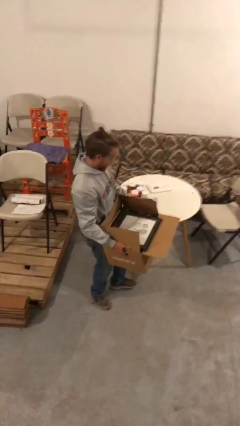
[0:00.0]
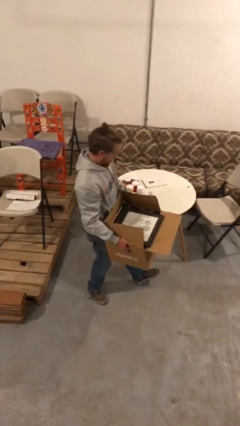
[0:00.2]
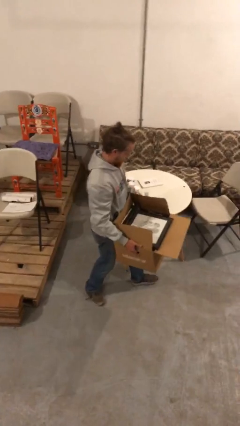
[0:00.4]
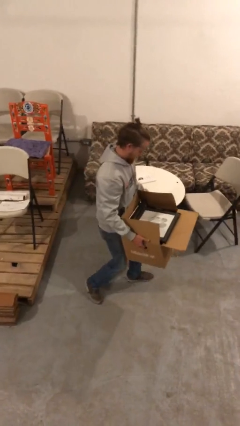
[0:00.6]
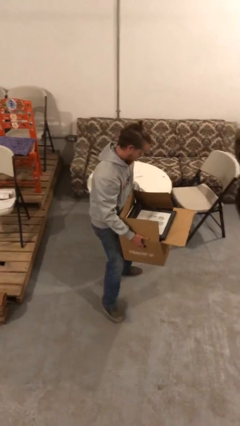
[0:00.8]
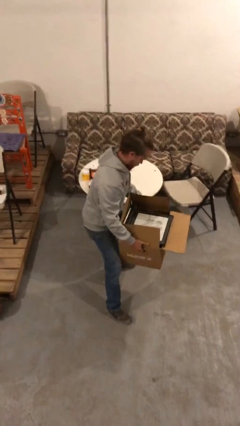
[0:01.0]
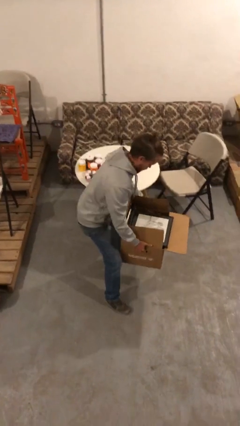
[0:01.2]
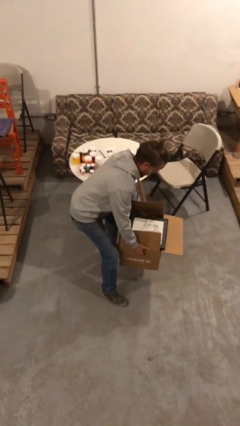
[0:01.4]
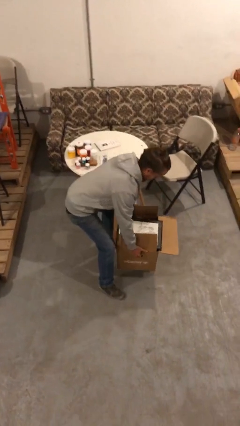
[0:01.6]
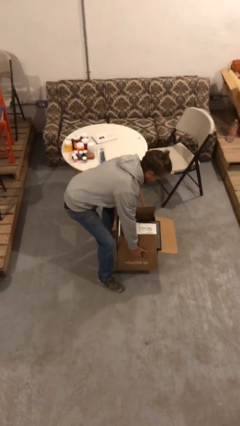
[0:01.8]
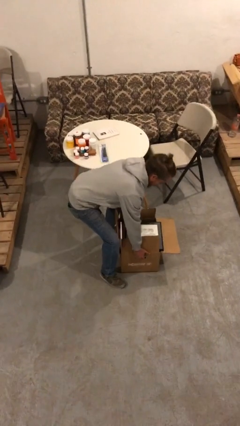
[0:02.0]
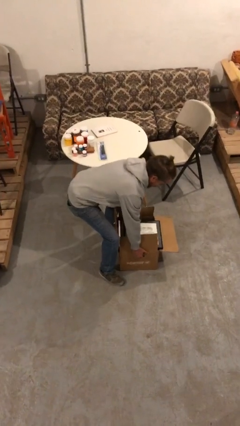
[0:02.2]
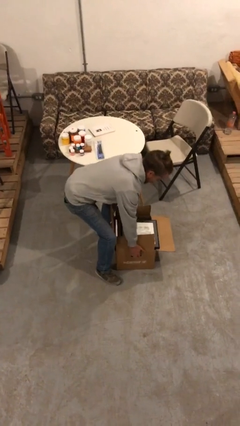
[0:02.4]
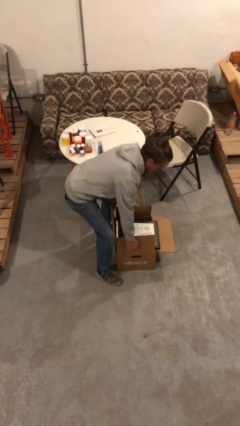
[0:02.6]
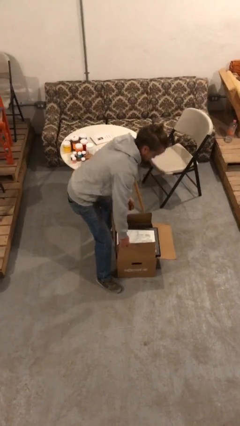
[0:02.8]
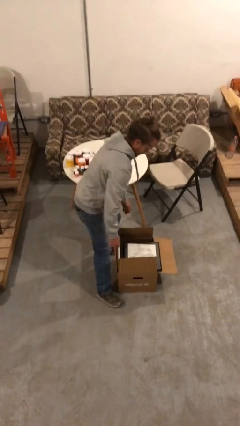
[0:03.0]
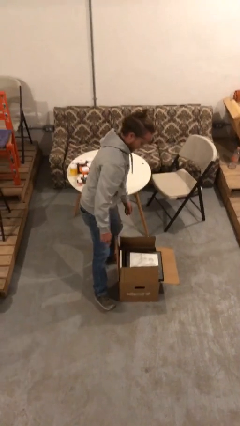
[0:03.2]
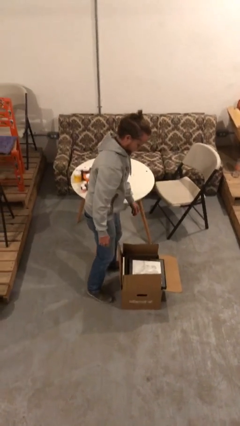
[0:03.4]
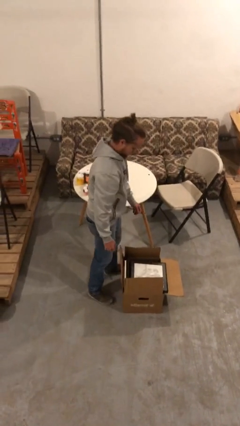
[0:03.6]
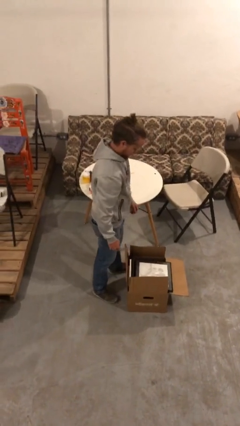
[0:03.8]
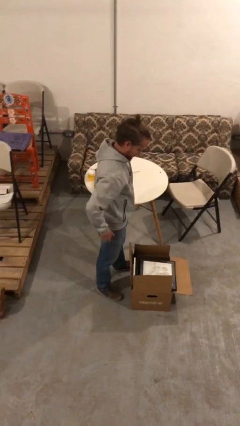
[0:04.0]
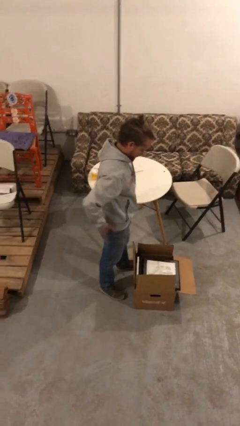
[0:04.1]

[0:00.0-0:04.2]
person puts down object on floor

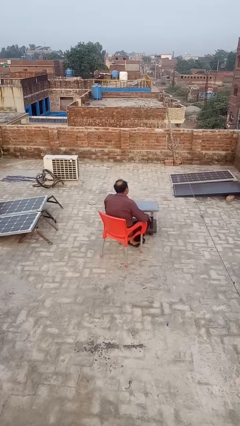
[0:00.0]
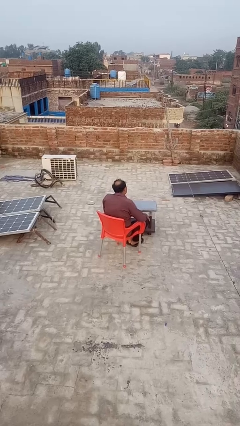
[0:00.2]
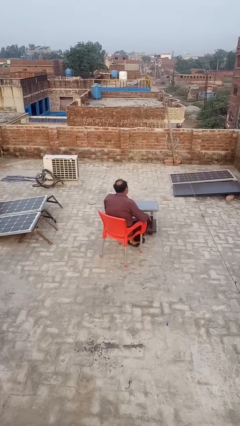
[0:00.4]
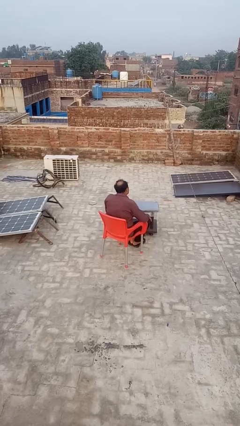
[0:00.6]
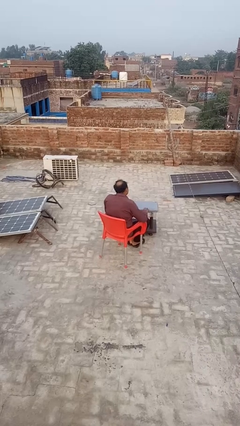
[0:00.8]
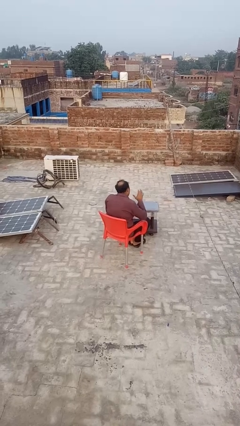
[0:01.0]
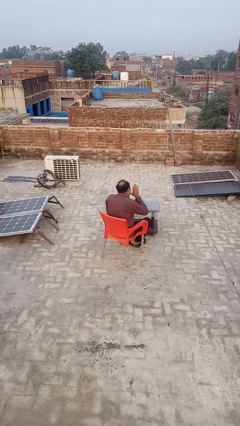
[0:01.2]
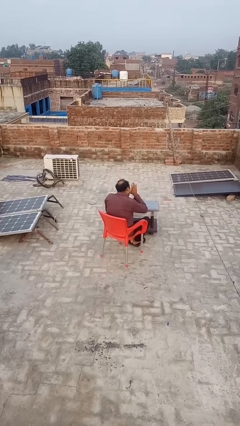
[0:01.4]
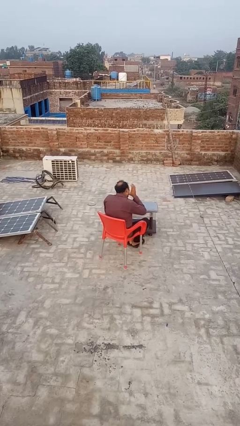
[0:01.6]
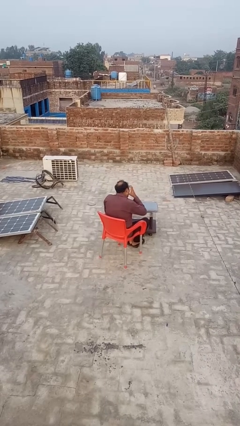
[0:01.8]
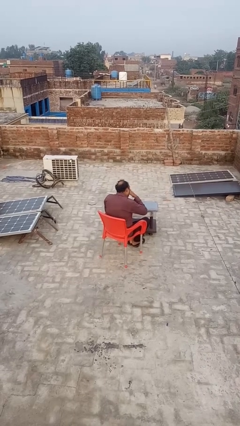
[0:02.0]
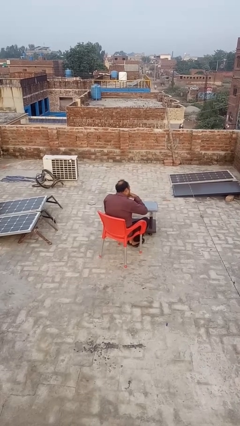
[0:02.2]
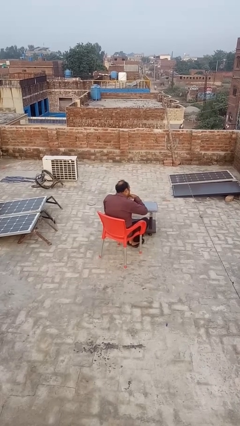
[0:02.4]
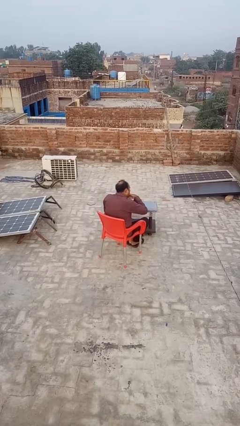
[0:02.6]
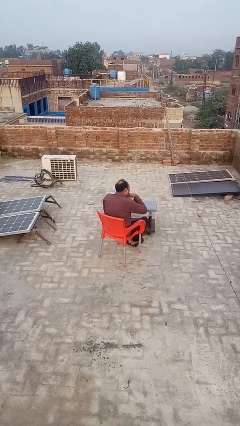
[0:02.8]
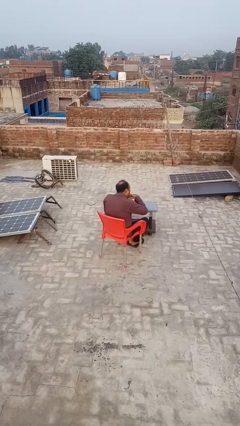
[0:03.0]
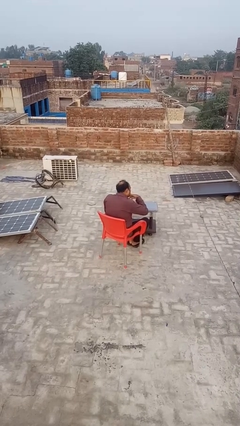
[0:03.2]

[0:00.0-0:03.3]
person licks fingers

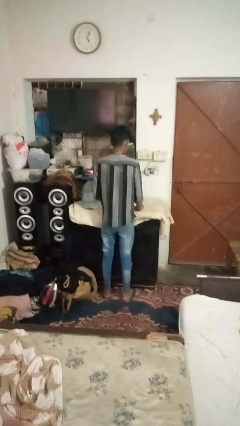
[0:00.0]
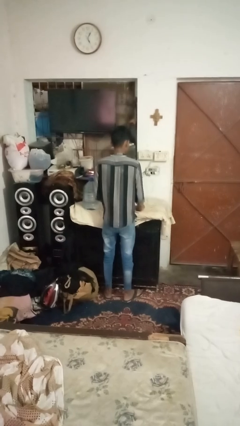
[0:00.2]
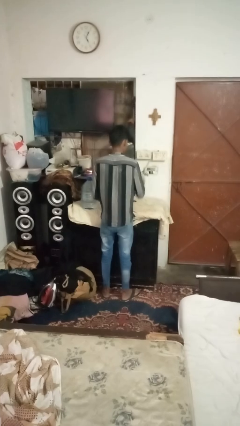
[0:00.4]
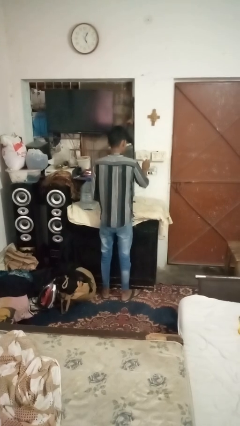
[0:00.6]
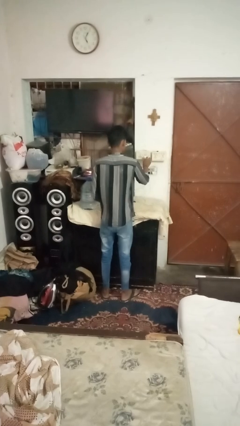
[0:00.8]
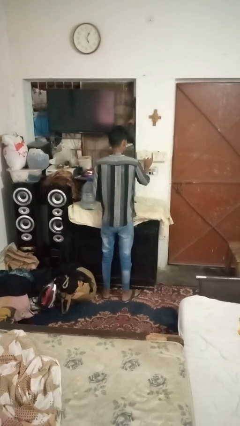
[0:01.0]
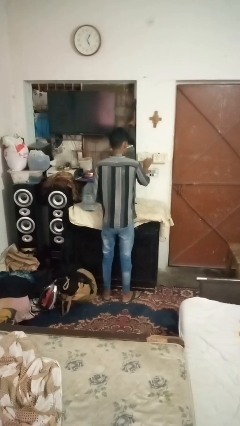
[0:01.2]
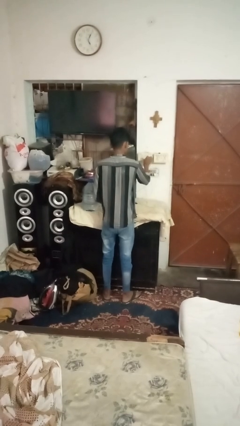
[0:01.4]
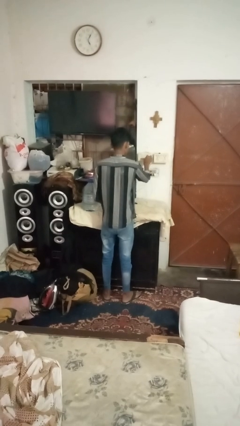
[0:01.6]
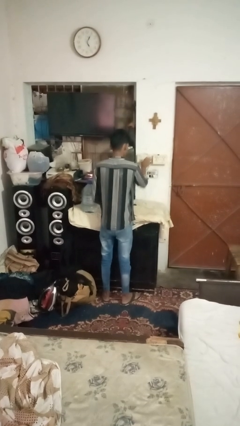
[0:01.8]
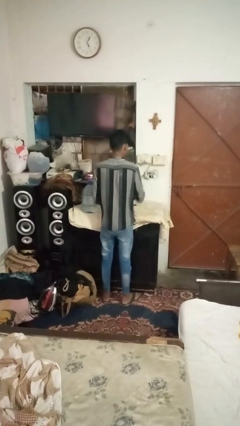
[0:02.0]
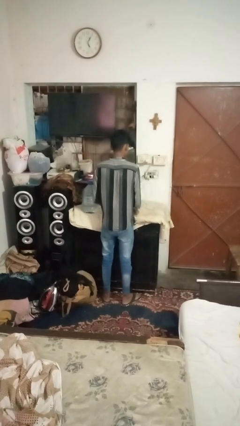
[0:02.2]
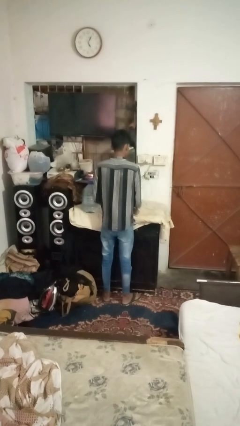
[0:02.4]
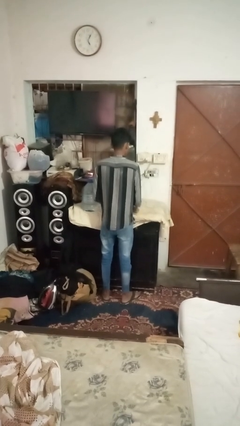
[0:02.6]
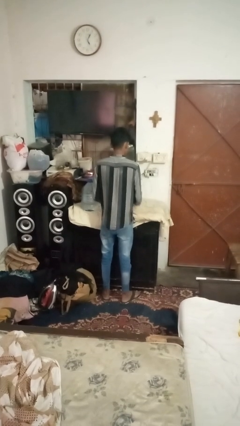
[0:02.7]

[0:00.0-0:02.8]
person plugs into electrical socket

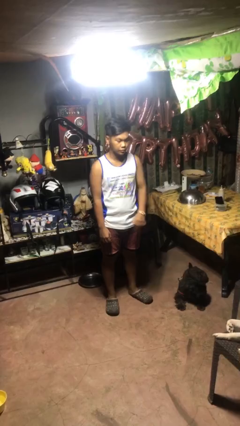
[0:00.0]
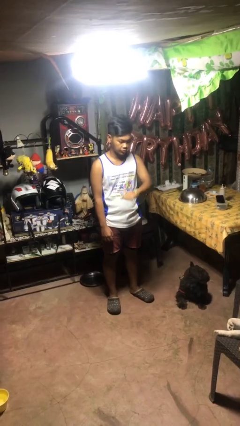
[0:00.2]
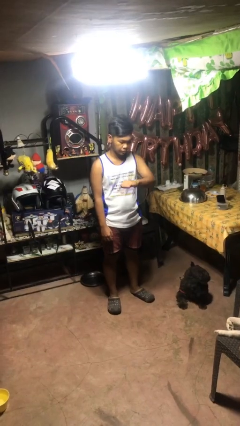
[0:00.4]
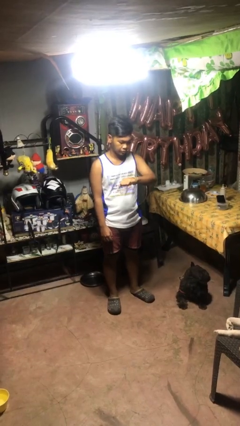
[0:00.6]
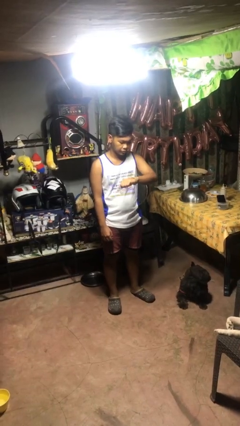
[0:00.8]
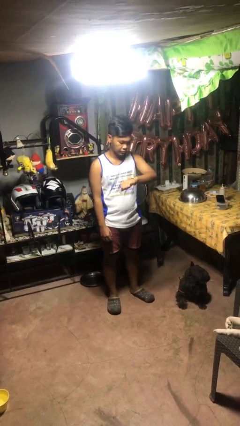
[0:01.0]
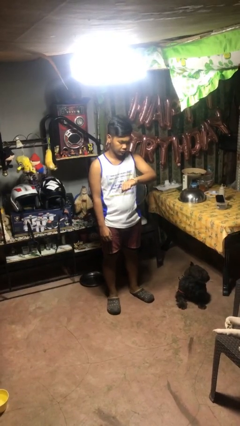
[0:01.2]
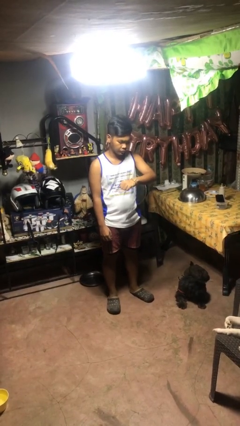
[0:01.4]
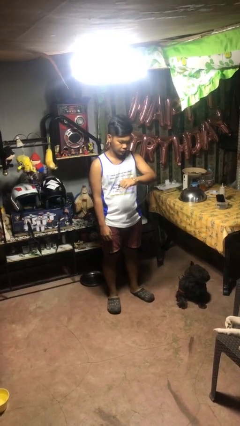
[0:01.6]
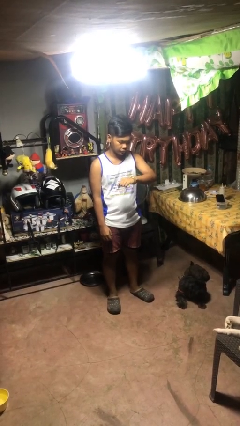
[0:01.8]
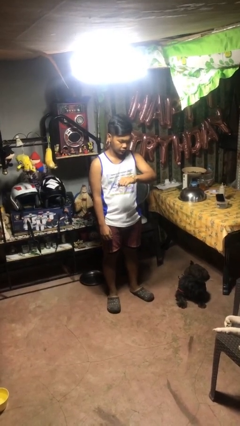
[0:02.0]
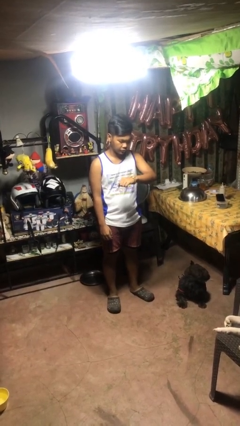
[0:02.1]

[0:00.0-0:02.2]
person looks at wristwatch

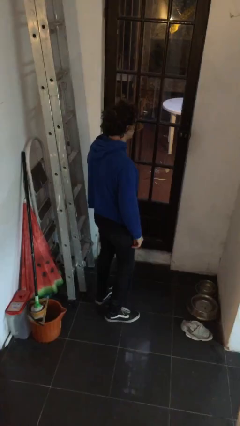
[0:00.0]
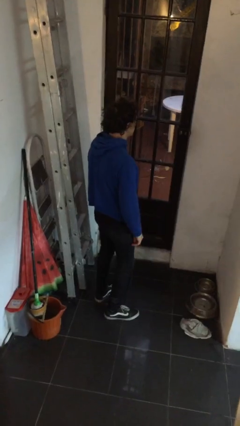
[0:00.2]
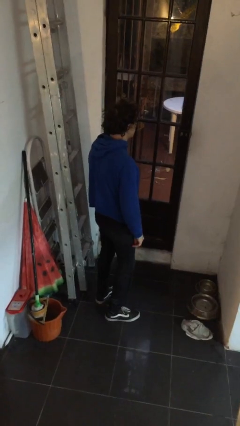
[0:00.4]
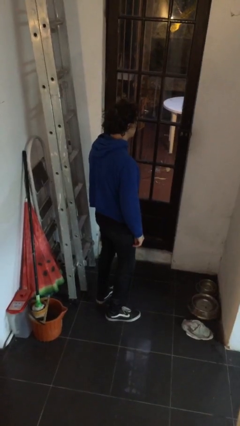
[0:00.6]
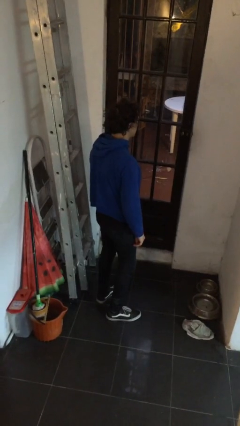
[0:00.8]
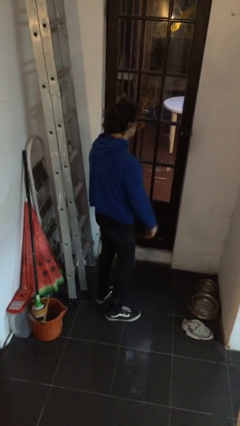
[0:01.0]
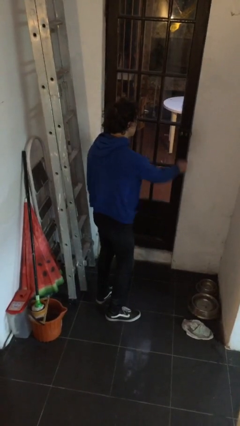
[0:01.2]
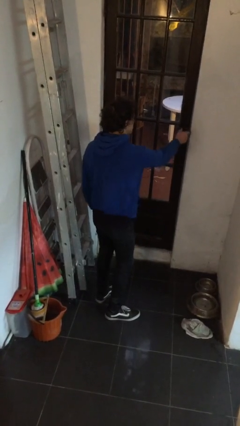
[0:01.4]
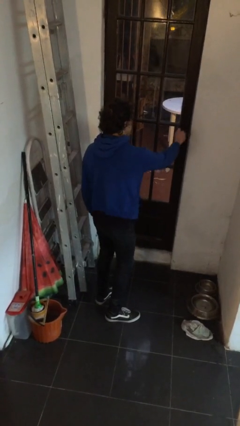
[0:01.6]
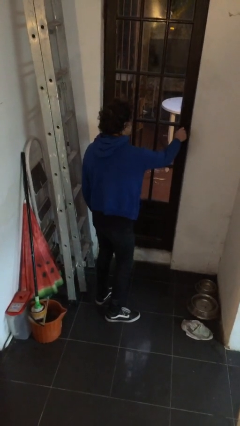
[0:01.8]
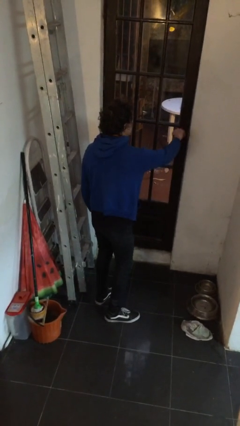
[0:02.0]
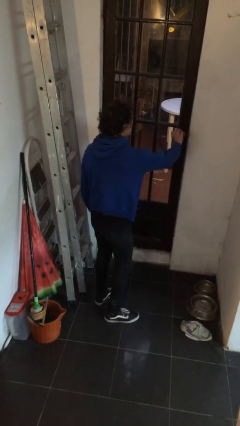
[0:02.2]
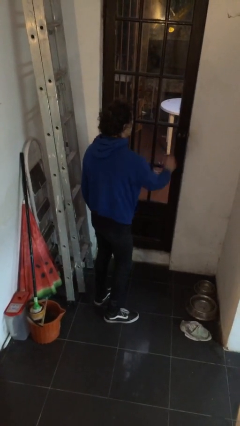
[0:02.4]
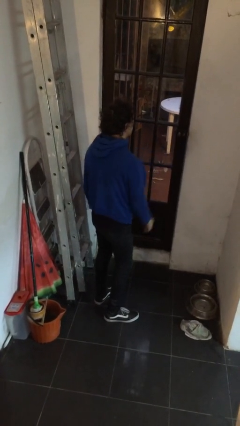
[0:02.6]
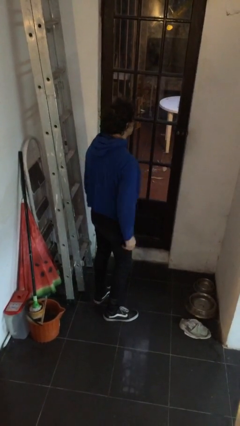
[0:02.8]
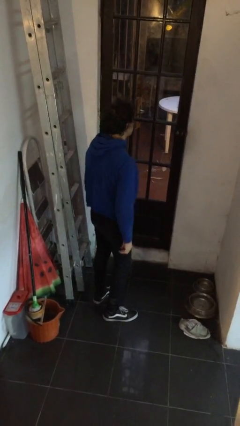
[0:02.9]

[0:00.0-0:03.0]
person unlocks door with keys

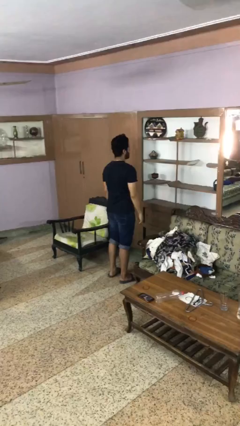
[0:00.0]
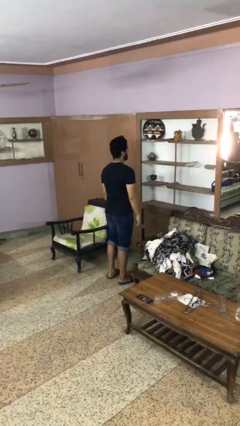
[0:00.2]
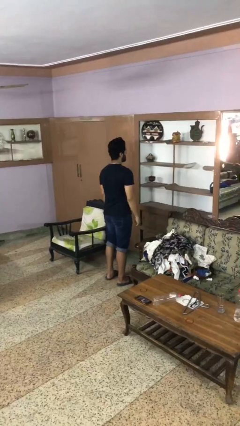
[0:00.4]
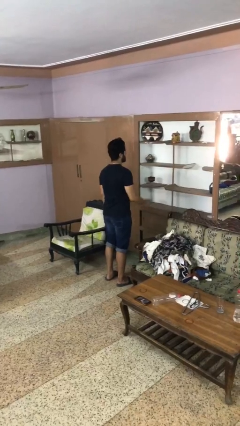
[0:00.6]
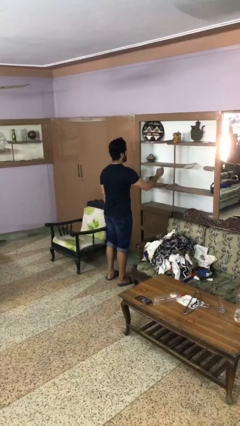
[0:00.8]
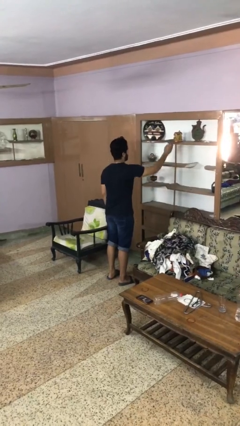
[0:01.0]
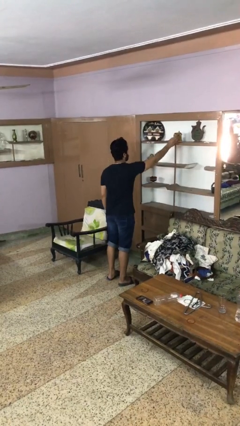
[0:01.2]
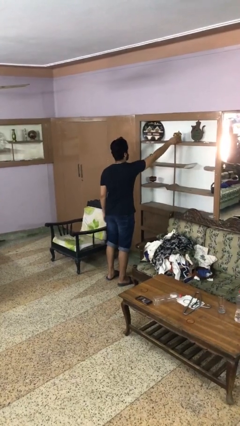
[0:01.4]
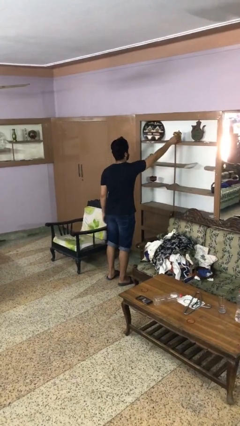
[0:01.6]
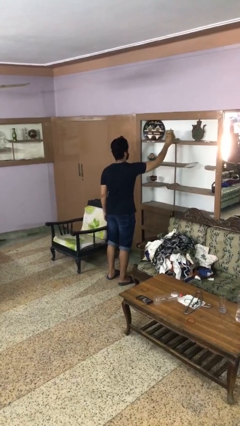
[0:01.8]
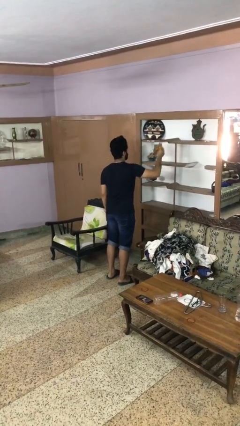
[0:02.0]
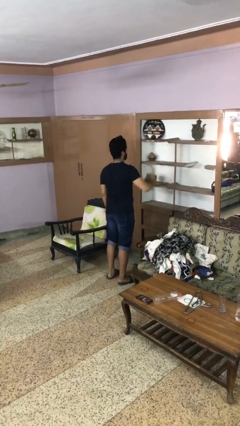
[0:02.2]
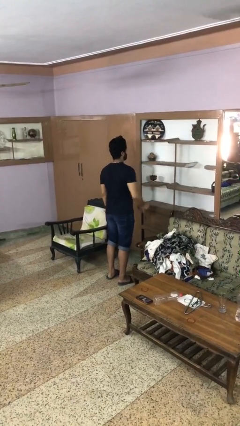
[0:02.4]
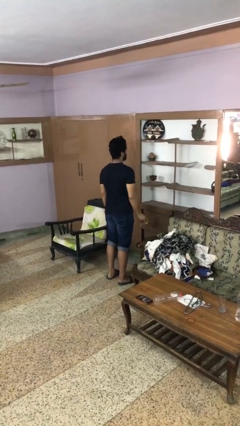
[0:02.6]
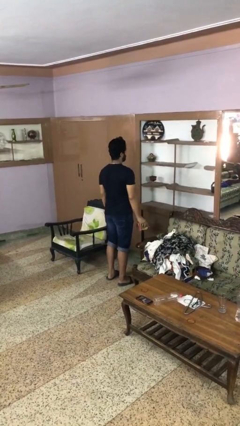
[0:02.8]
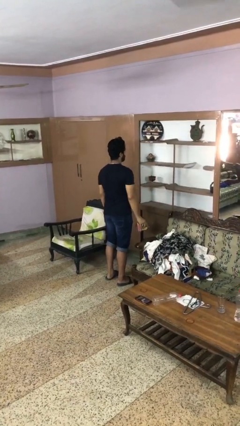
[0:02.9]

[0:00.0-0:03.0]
person picks up object from shelf
